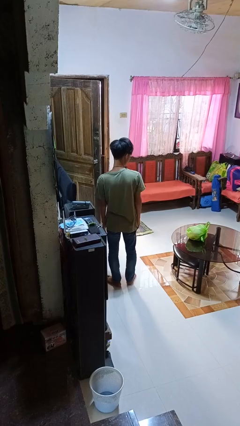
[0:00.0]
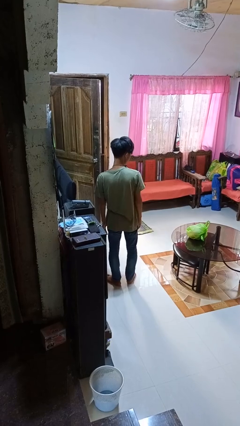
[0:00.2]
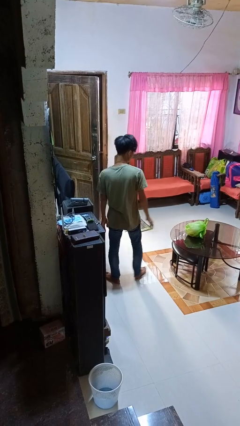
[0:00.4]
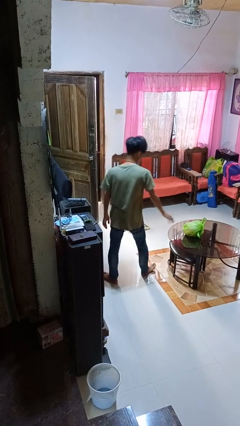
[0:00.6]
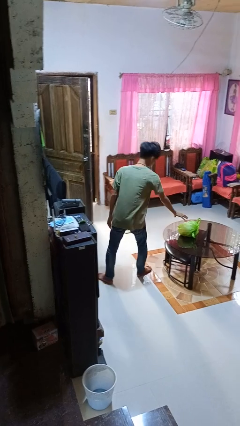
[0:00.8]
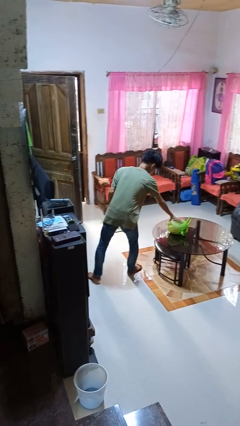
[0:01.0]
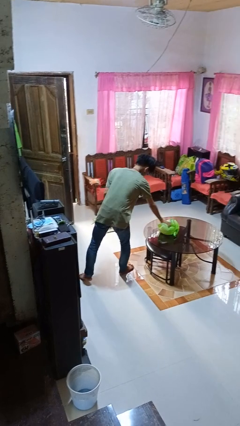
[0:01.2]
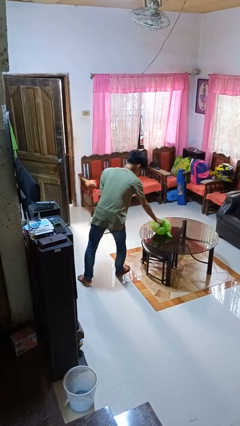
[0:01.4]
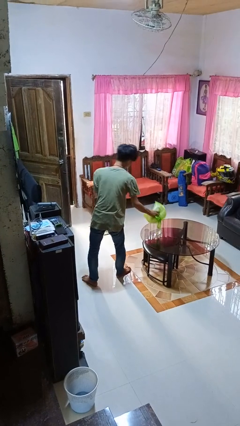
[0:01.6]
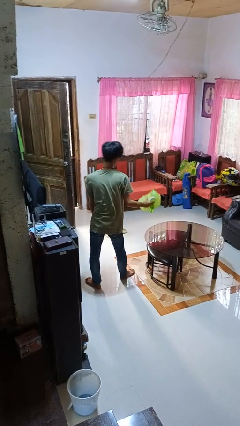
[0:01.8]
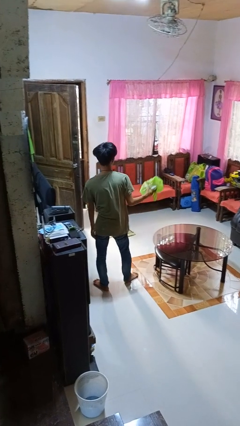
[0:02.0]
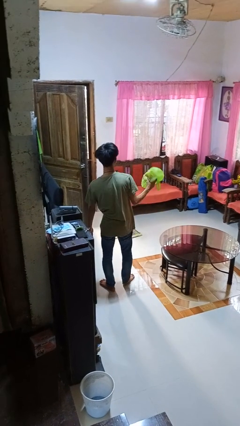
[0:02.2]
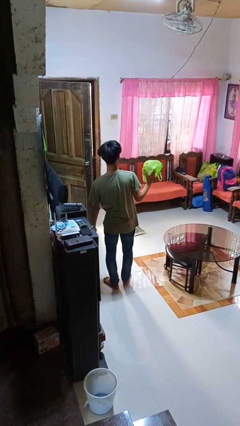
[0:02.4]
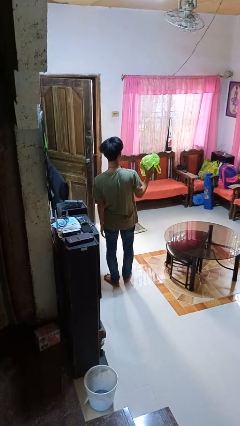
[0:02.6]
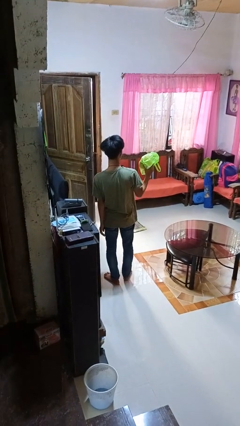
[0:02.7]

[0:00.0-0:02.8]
person picks up object from table

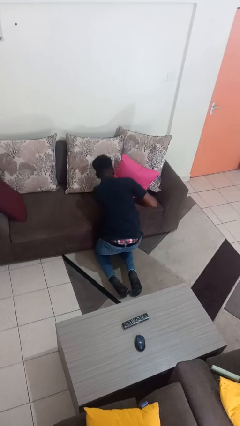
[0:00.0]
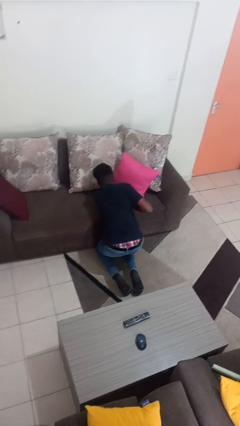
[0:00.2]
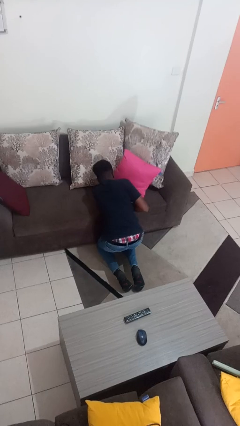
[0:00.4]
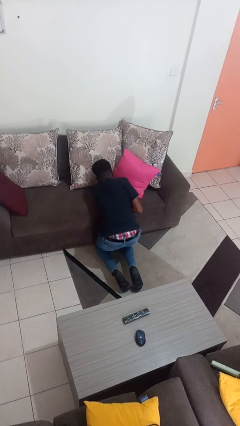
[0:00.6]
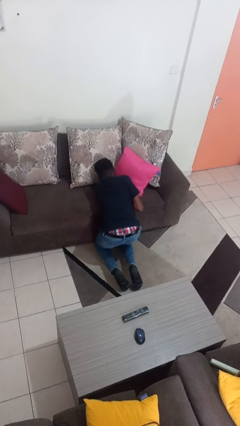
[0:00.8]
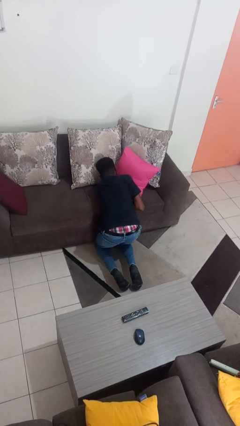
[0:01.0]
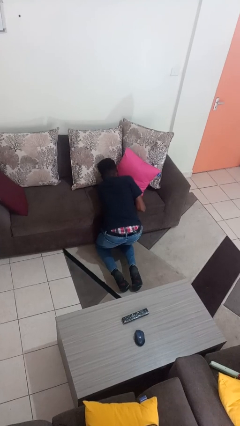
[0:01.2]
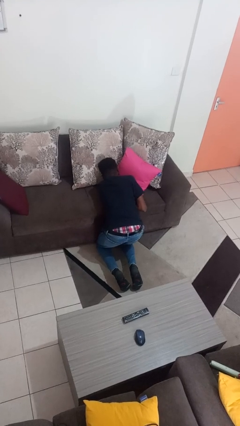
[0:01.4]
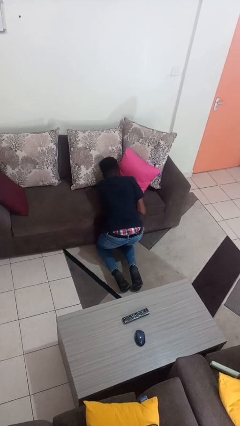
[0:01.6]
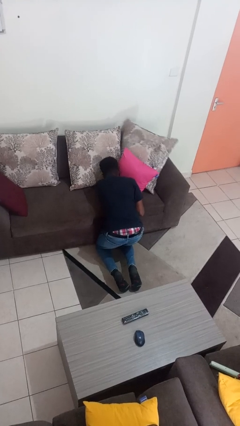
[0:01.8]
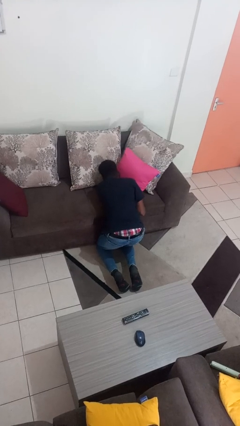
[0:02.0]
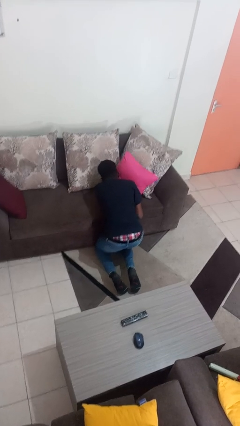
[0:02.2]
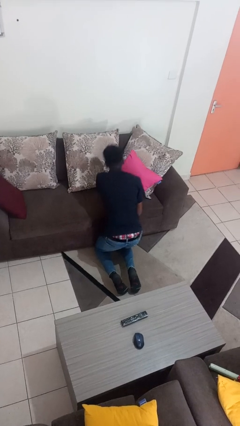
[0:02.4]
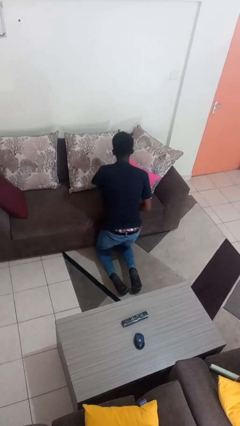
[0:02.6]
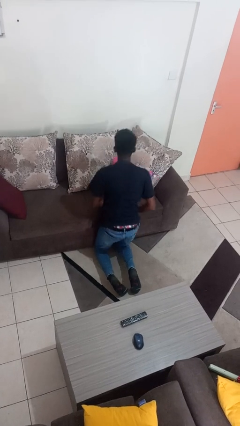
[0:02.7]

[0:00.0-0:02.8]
person searches in couch

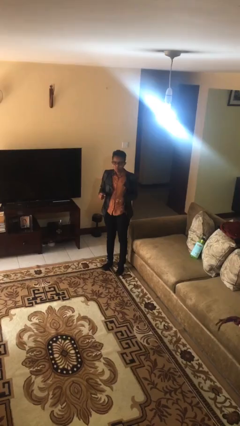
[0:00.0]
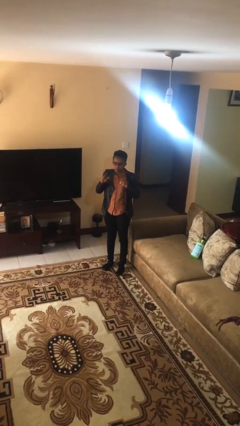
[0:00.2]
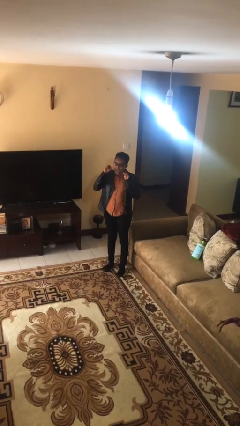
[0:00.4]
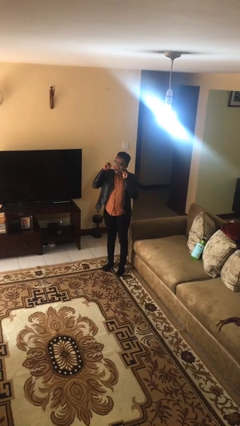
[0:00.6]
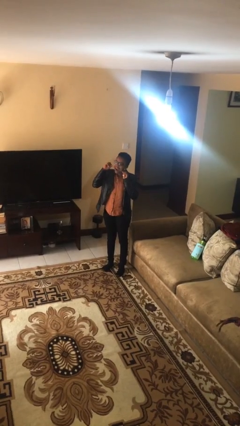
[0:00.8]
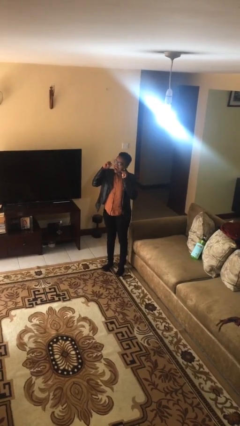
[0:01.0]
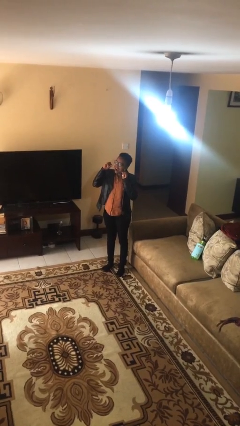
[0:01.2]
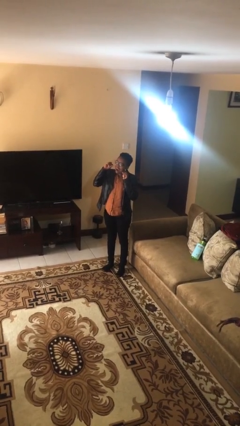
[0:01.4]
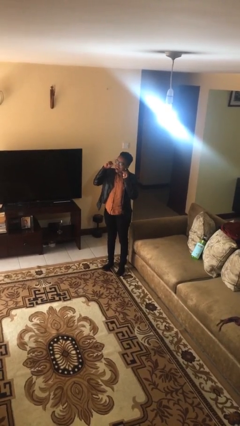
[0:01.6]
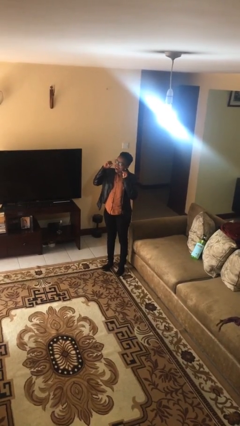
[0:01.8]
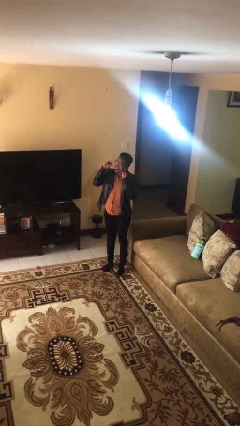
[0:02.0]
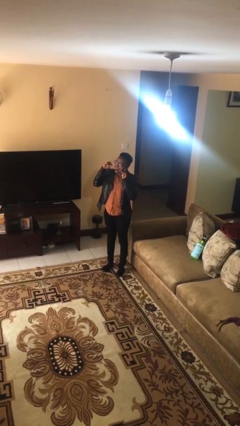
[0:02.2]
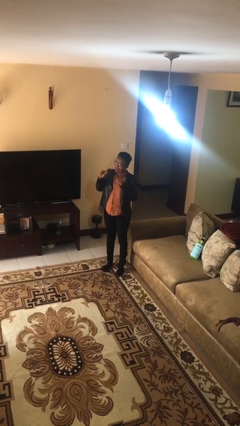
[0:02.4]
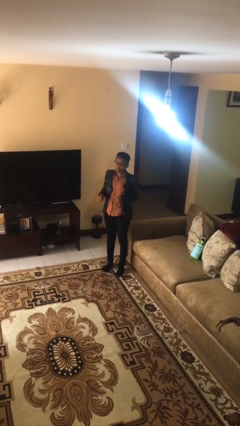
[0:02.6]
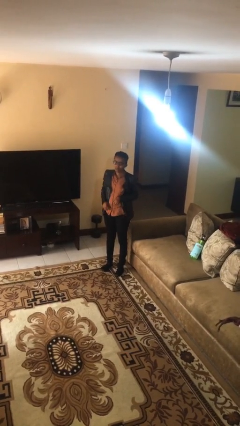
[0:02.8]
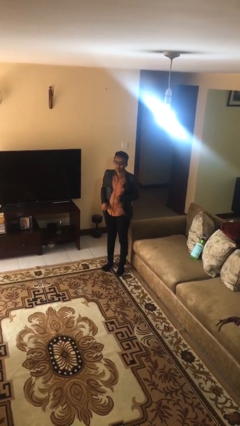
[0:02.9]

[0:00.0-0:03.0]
person flosses

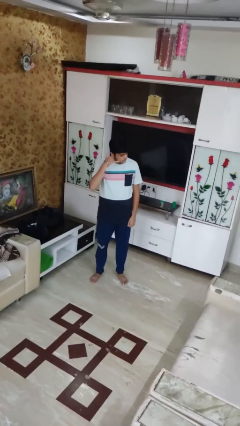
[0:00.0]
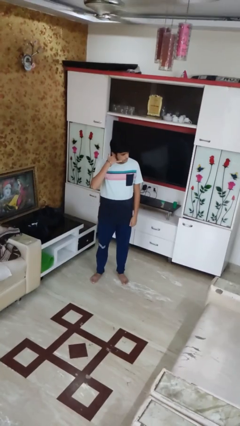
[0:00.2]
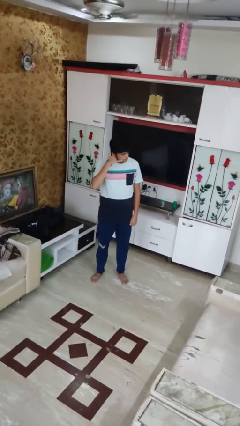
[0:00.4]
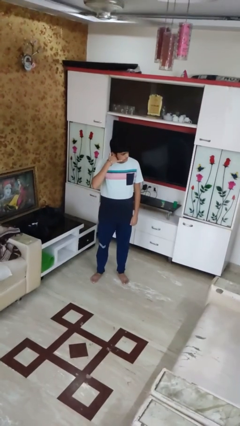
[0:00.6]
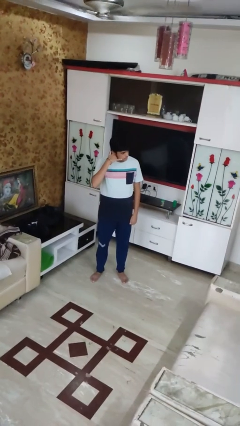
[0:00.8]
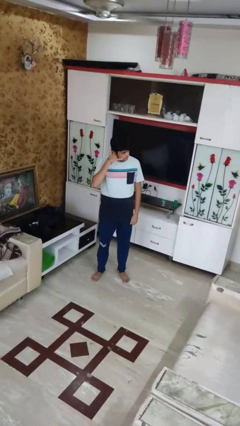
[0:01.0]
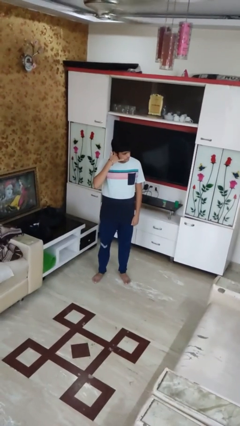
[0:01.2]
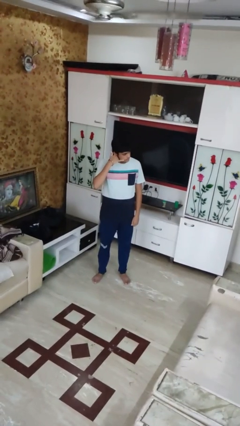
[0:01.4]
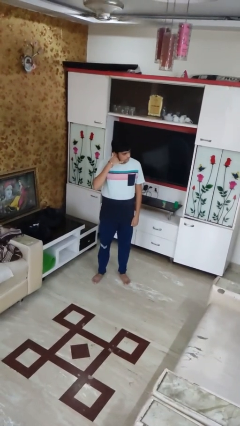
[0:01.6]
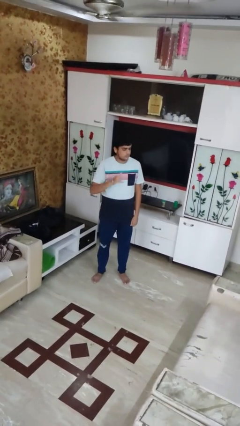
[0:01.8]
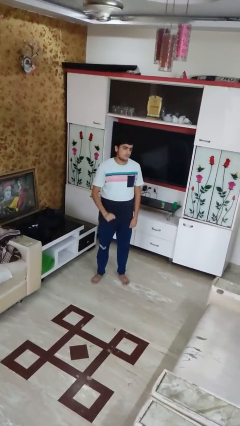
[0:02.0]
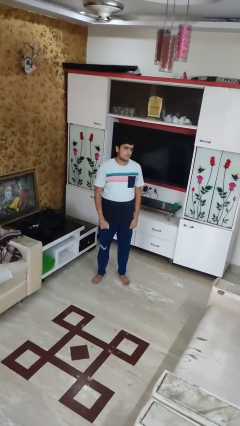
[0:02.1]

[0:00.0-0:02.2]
person gestures call me

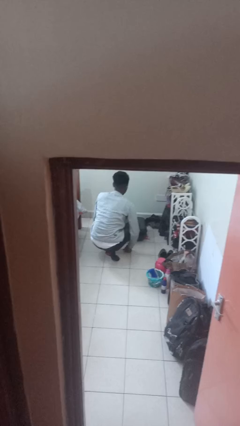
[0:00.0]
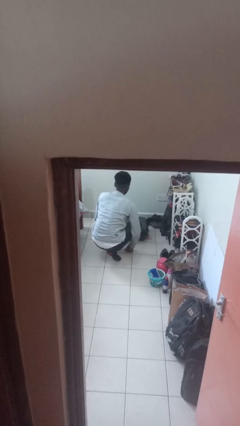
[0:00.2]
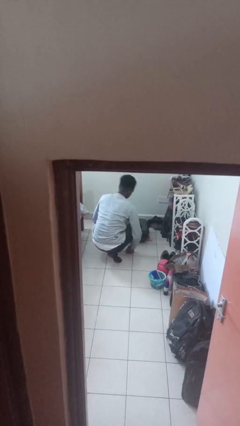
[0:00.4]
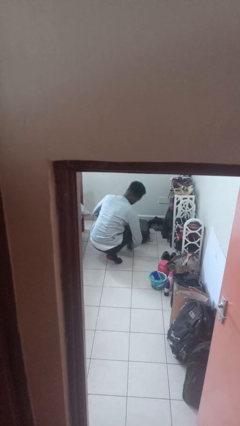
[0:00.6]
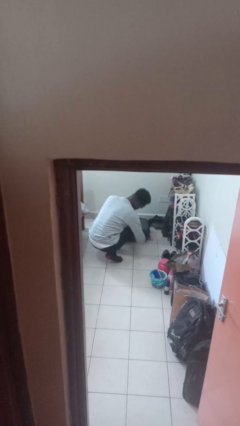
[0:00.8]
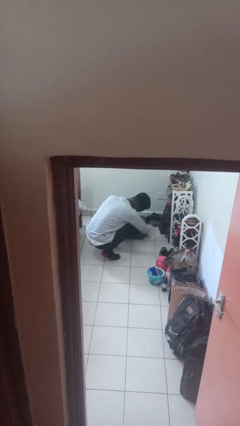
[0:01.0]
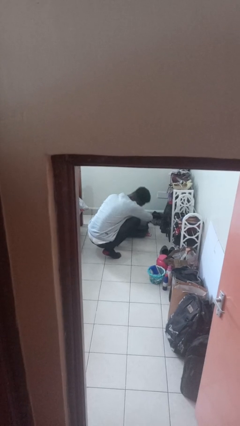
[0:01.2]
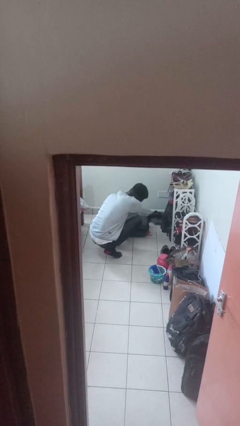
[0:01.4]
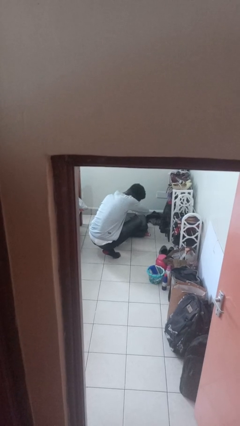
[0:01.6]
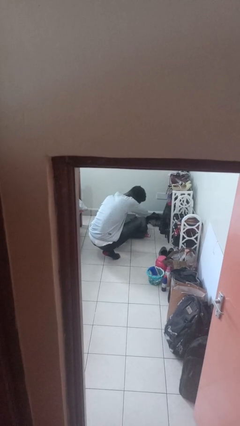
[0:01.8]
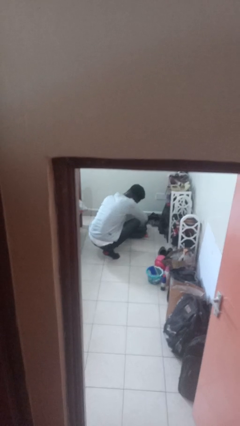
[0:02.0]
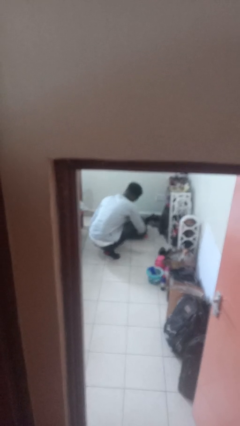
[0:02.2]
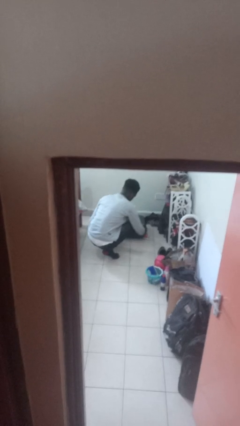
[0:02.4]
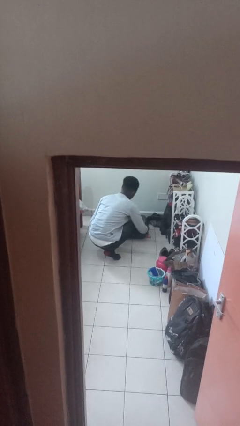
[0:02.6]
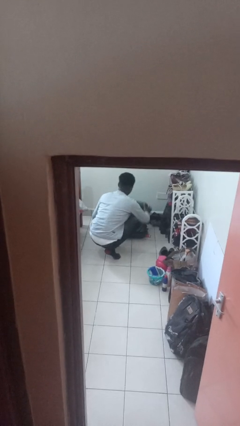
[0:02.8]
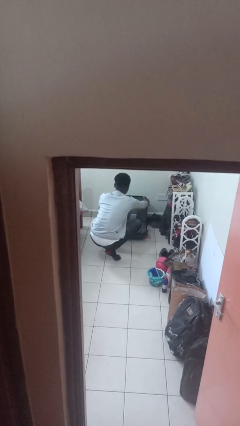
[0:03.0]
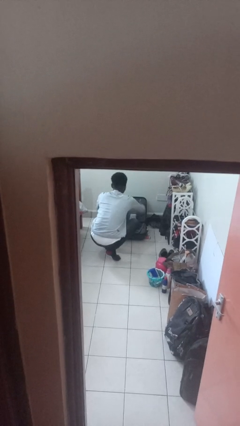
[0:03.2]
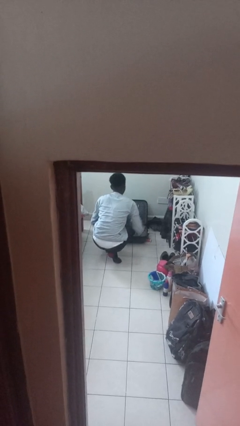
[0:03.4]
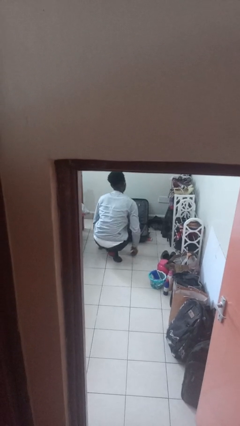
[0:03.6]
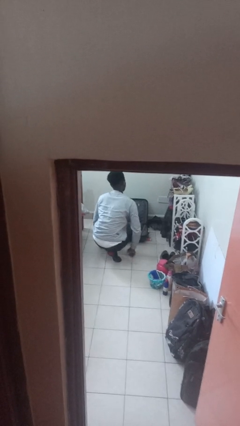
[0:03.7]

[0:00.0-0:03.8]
person opens suitcase

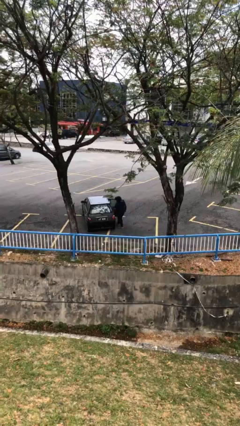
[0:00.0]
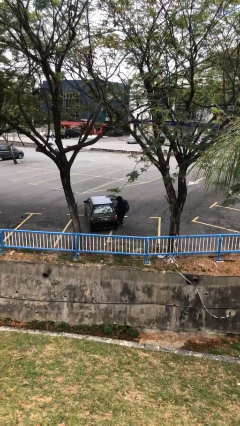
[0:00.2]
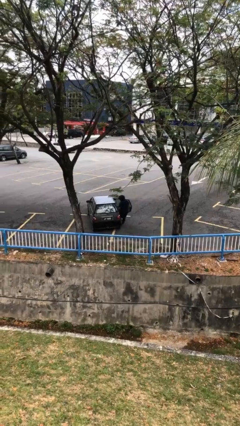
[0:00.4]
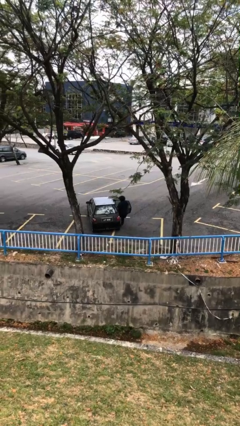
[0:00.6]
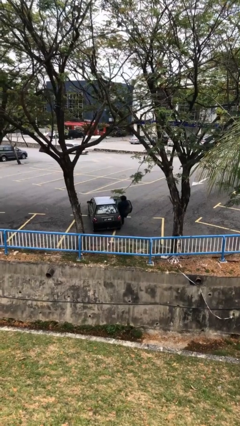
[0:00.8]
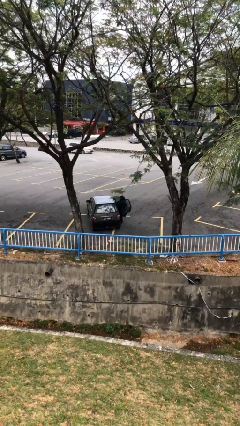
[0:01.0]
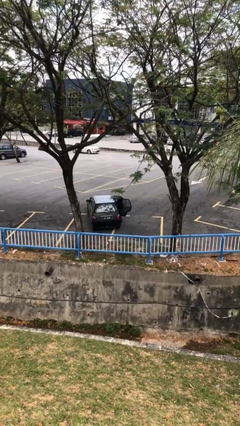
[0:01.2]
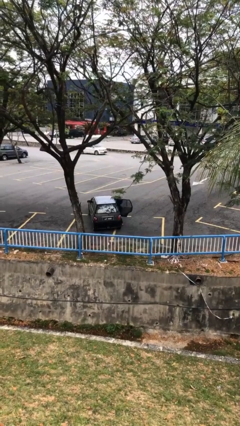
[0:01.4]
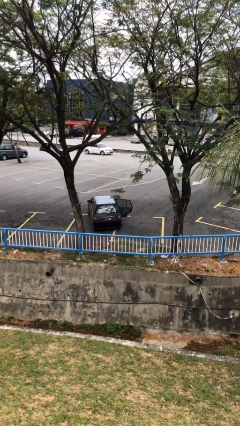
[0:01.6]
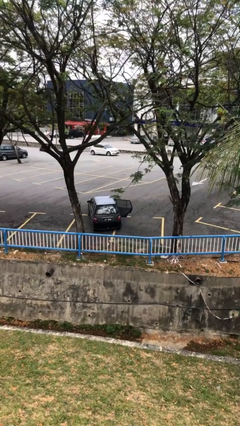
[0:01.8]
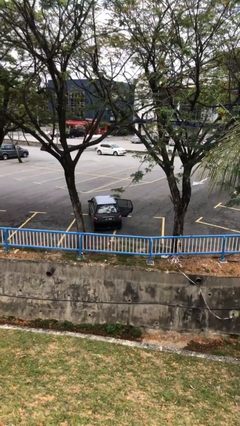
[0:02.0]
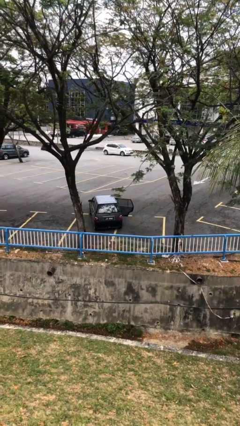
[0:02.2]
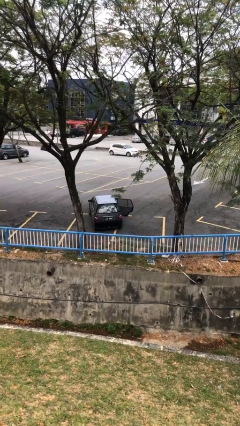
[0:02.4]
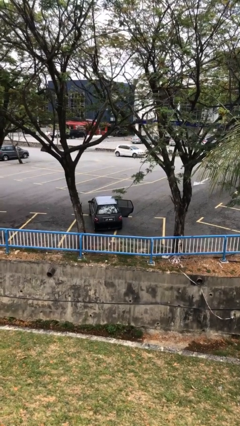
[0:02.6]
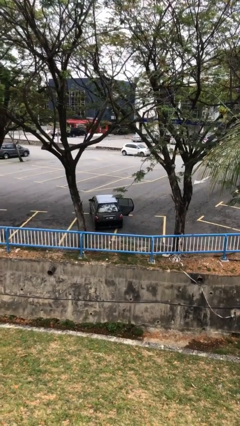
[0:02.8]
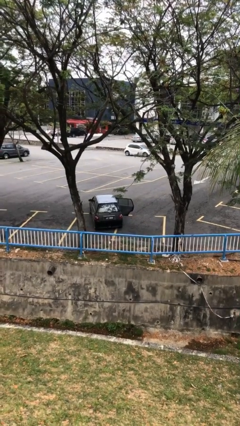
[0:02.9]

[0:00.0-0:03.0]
person enters car
